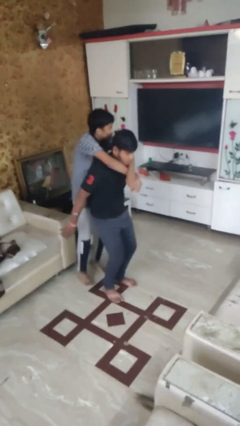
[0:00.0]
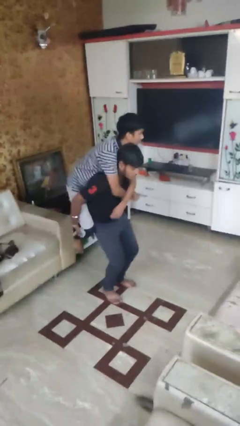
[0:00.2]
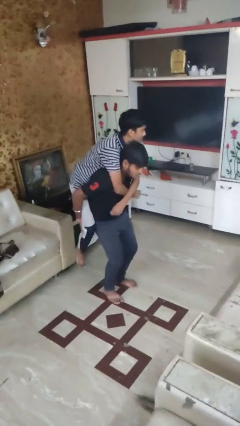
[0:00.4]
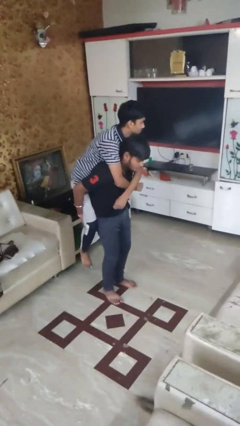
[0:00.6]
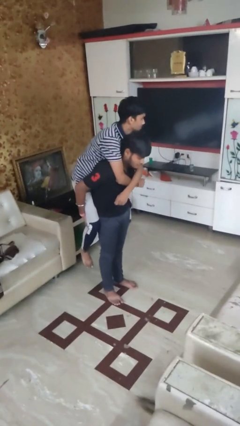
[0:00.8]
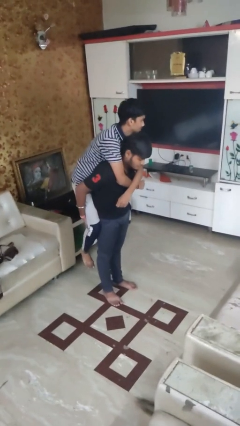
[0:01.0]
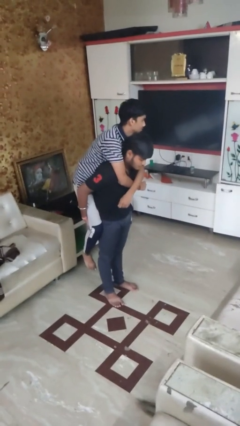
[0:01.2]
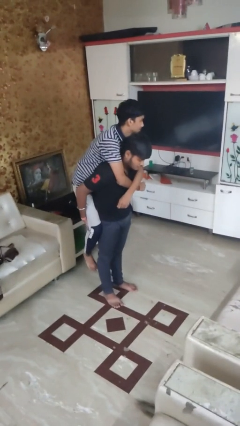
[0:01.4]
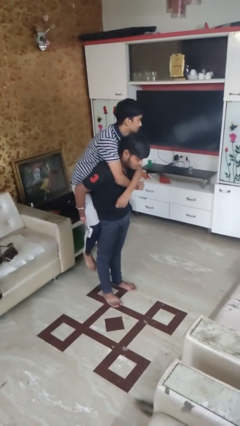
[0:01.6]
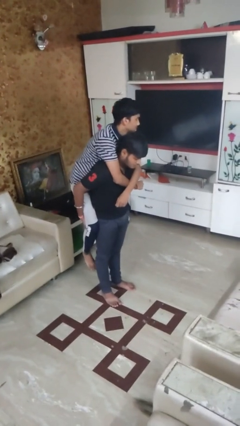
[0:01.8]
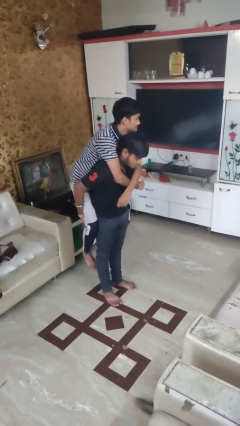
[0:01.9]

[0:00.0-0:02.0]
person carries person over shoulder

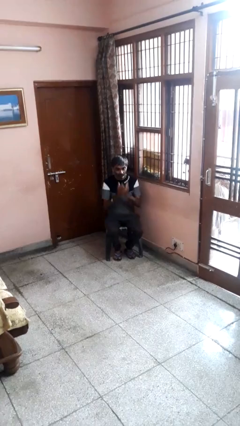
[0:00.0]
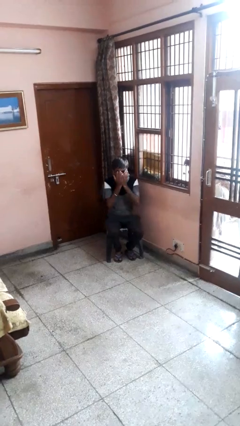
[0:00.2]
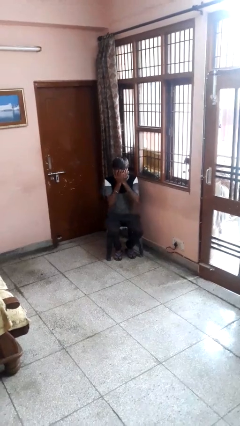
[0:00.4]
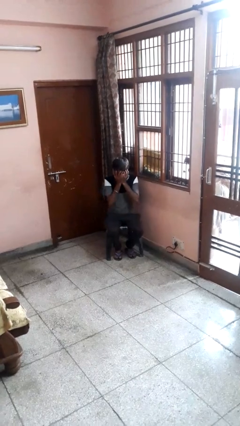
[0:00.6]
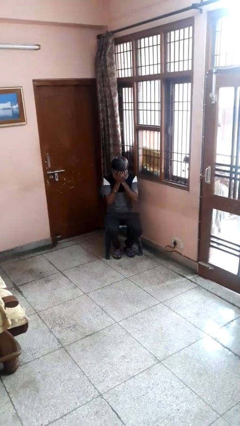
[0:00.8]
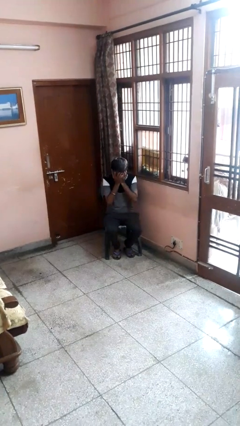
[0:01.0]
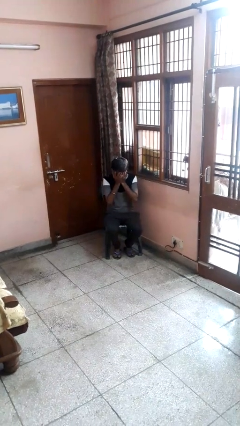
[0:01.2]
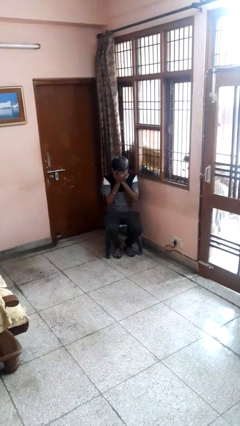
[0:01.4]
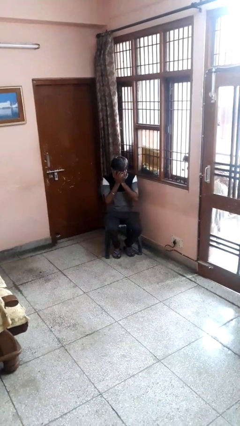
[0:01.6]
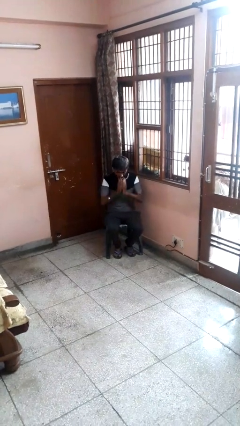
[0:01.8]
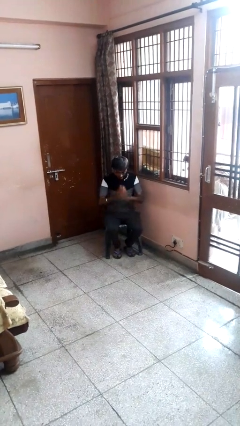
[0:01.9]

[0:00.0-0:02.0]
person covers face with hands

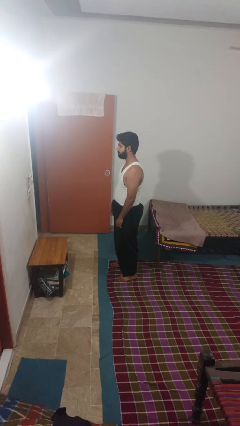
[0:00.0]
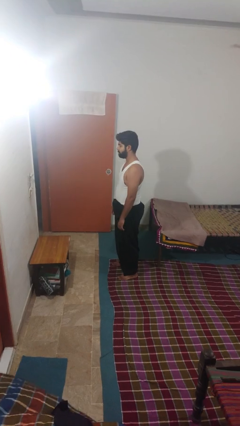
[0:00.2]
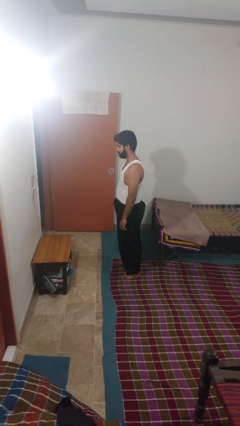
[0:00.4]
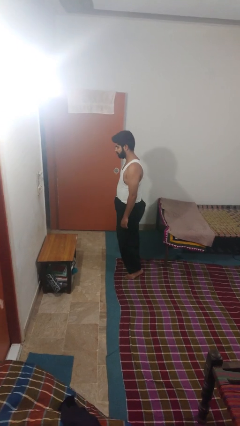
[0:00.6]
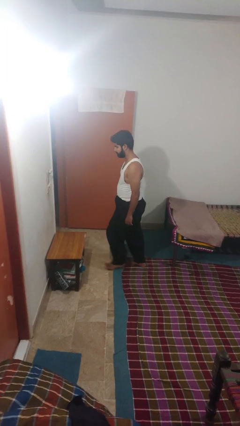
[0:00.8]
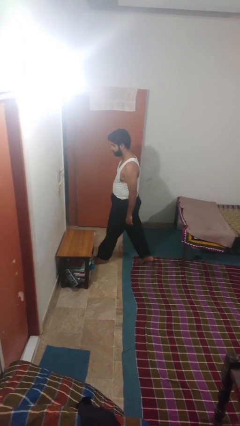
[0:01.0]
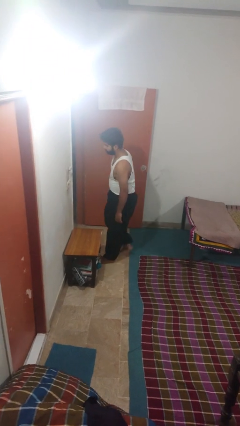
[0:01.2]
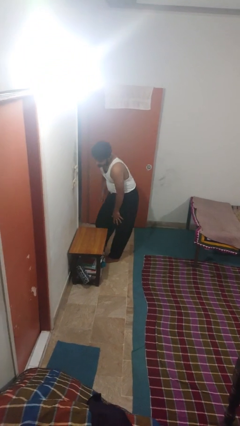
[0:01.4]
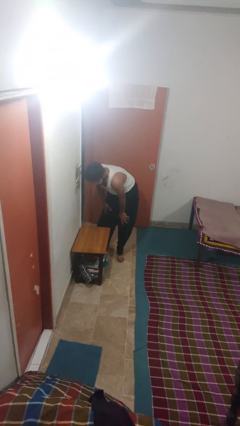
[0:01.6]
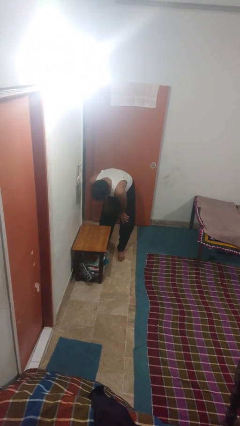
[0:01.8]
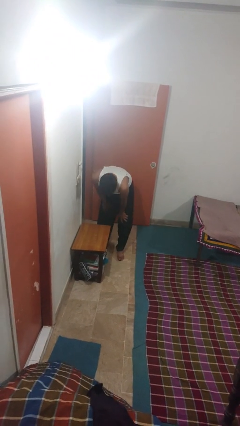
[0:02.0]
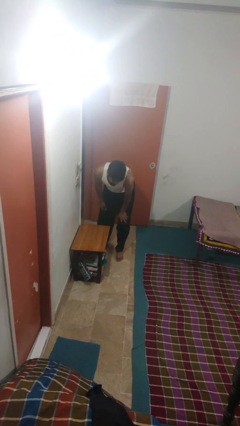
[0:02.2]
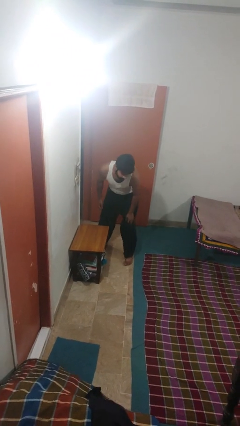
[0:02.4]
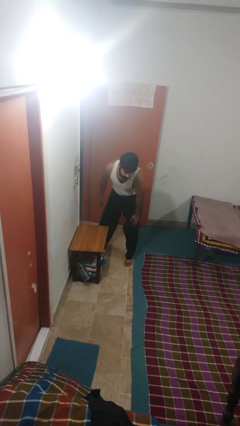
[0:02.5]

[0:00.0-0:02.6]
person bumps into table

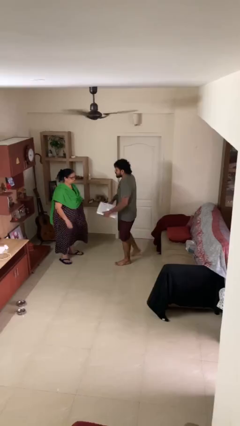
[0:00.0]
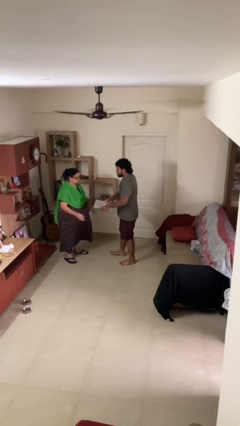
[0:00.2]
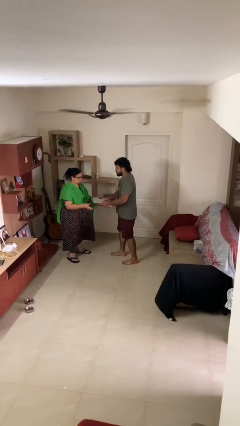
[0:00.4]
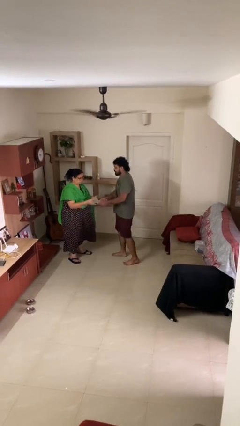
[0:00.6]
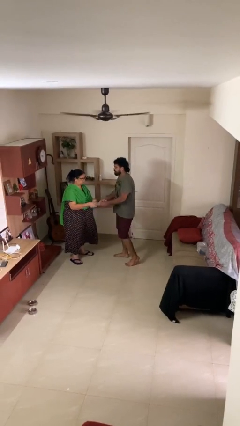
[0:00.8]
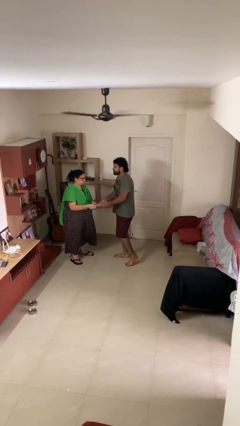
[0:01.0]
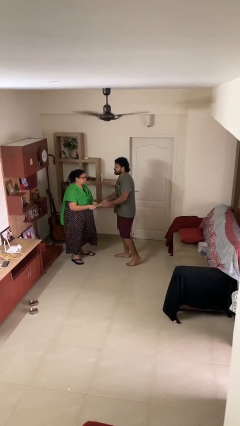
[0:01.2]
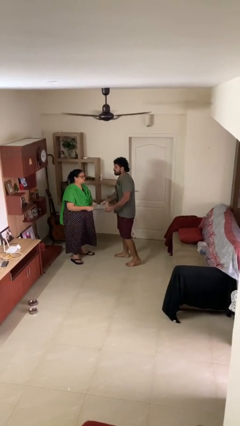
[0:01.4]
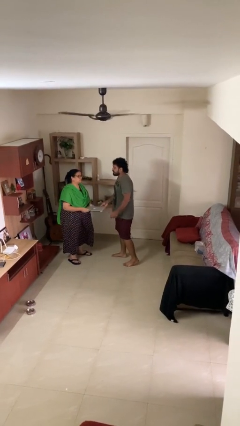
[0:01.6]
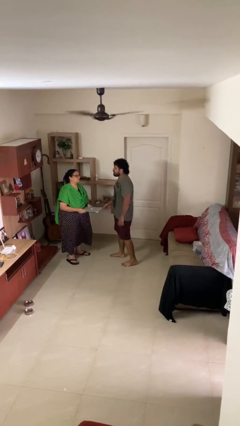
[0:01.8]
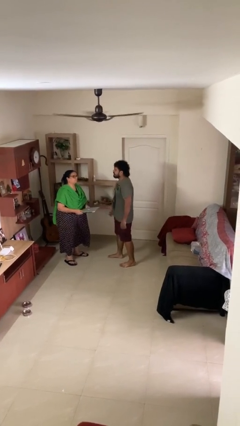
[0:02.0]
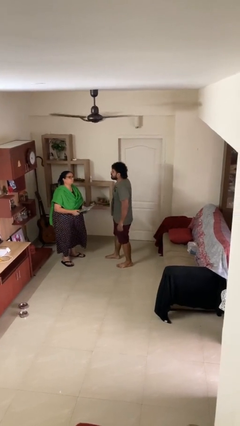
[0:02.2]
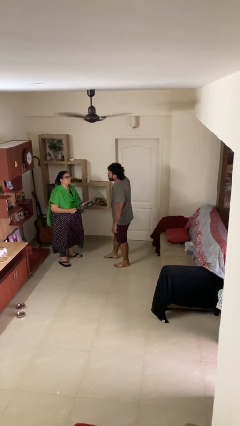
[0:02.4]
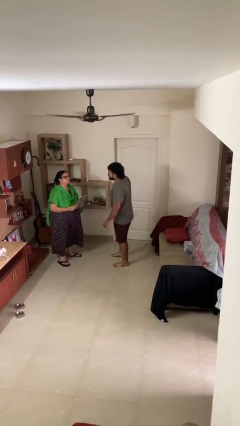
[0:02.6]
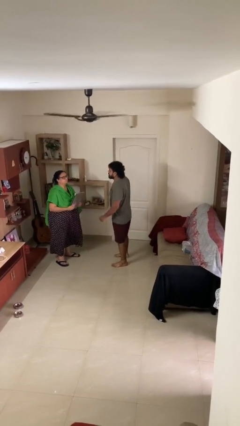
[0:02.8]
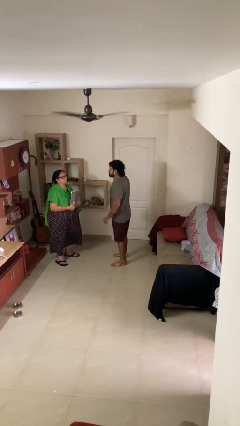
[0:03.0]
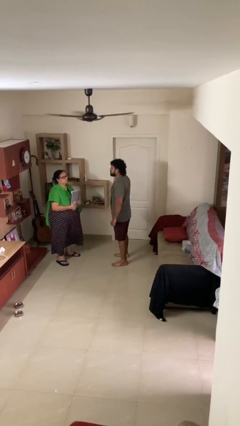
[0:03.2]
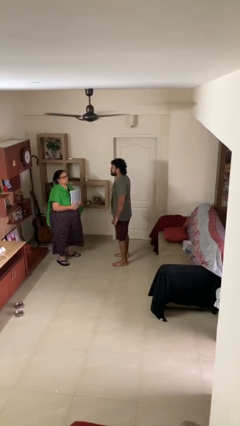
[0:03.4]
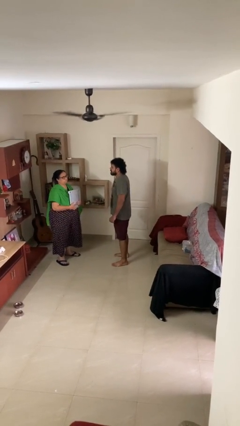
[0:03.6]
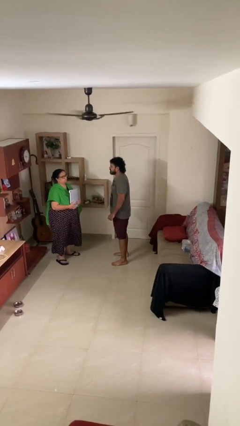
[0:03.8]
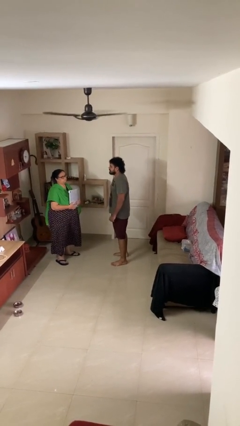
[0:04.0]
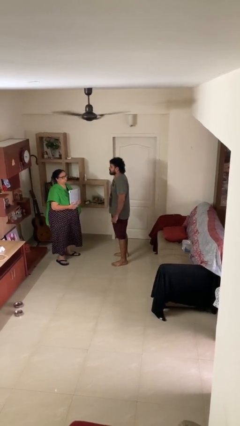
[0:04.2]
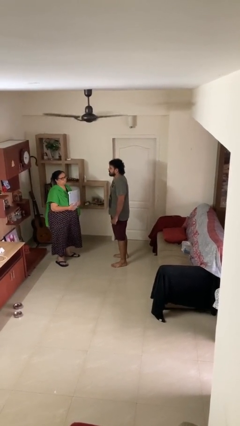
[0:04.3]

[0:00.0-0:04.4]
person transfers object to person

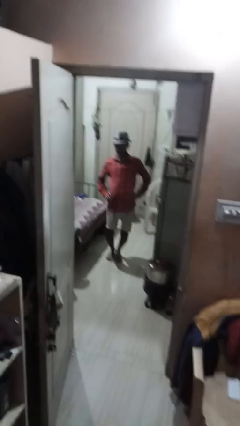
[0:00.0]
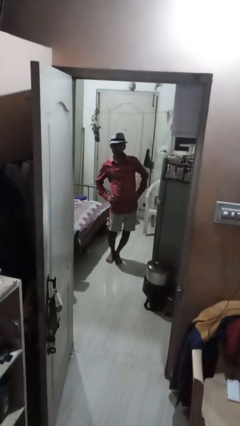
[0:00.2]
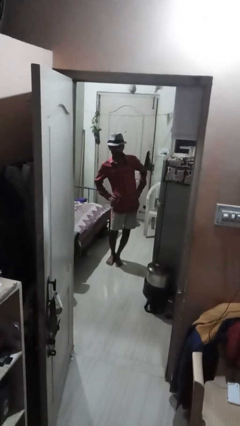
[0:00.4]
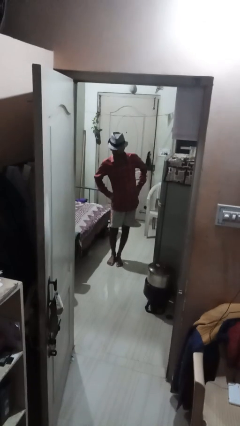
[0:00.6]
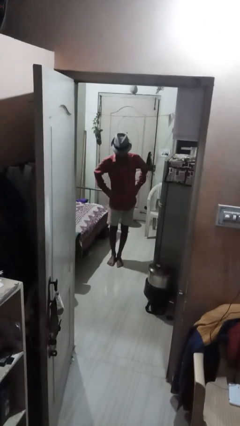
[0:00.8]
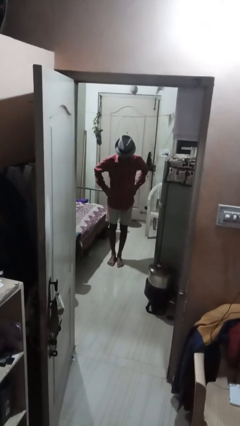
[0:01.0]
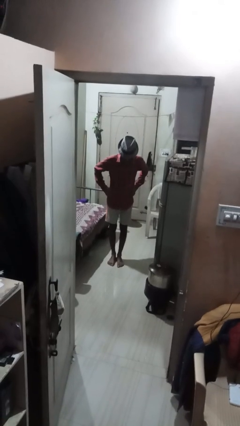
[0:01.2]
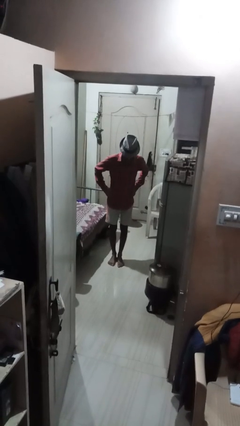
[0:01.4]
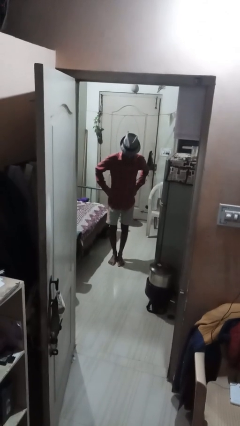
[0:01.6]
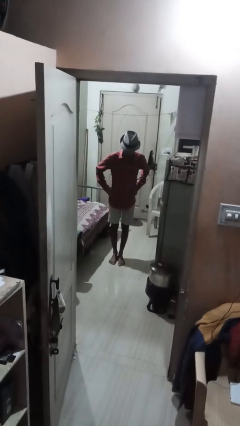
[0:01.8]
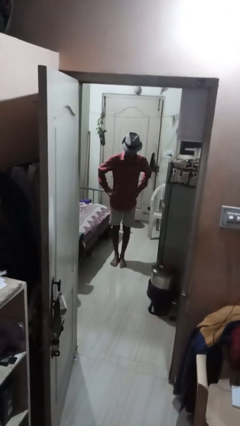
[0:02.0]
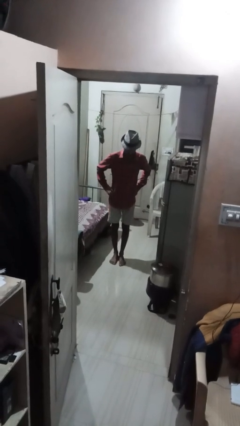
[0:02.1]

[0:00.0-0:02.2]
person wiggles hips

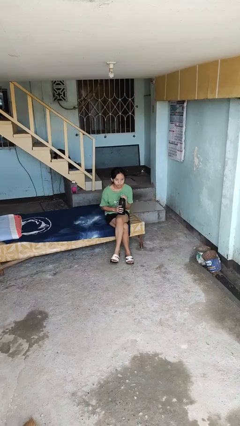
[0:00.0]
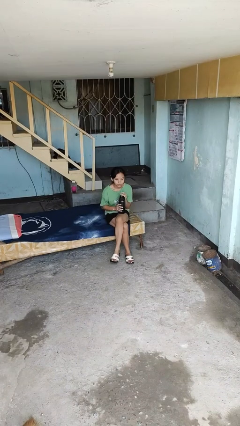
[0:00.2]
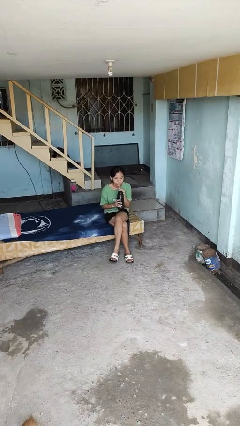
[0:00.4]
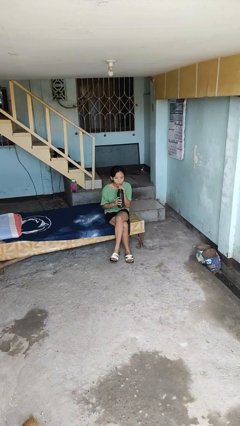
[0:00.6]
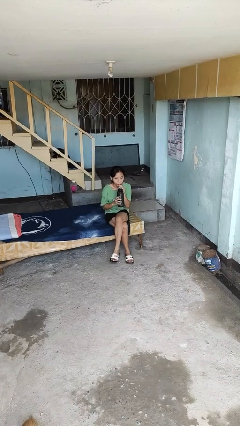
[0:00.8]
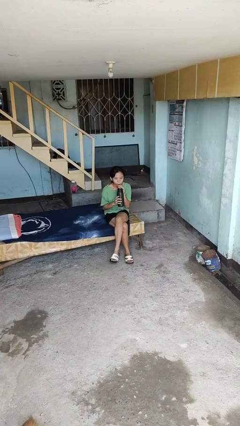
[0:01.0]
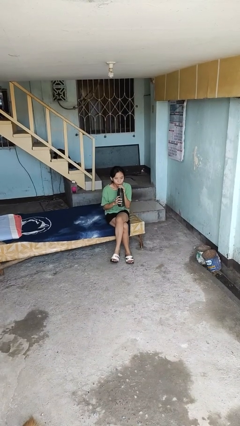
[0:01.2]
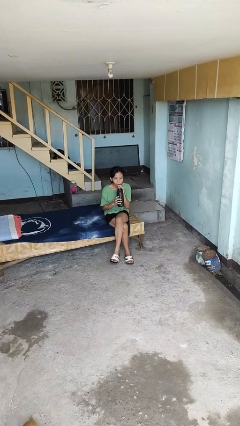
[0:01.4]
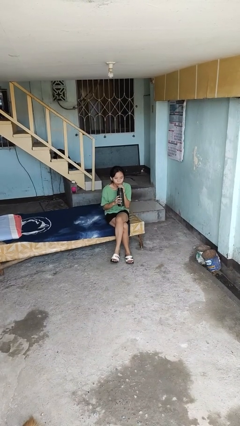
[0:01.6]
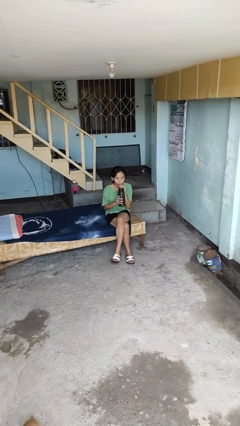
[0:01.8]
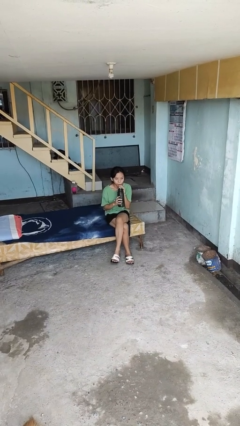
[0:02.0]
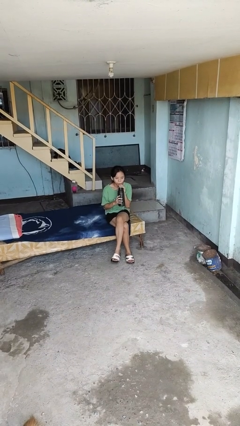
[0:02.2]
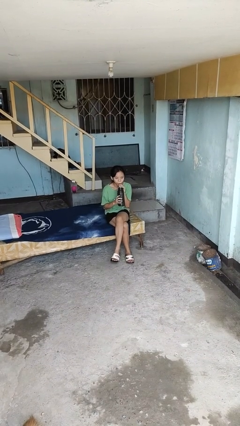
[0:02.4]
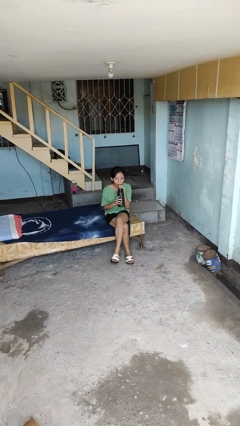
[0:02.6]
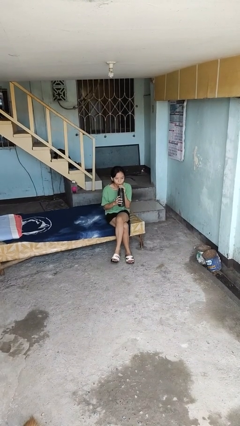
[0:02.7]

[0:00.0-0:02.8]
person drinks from straw

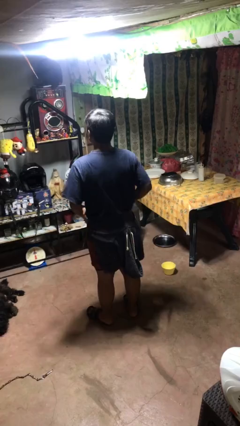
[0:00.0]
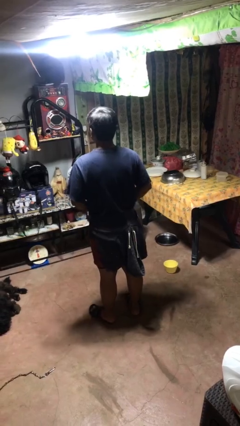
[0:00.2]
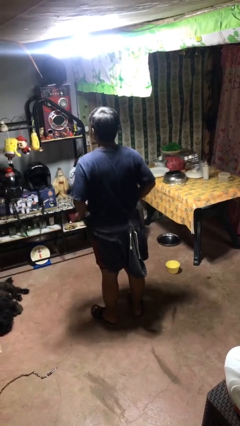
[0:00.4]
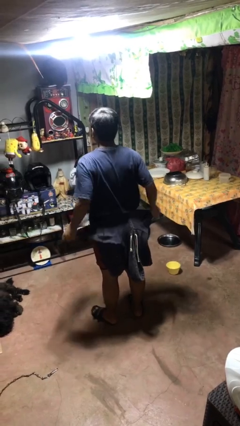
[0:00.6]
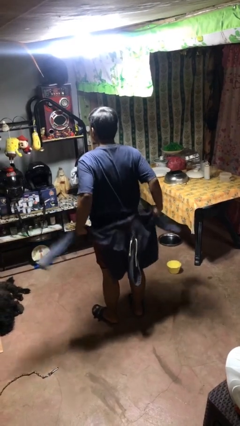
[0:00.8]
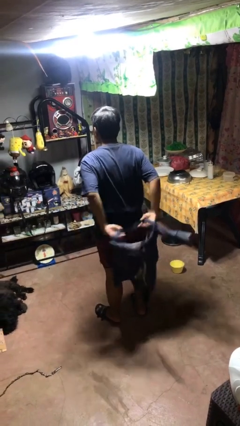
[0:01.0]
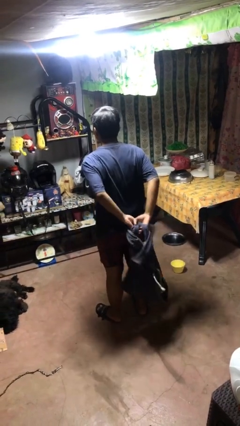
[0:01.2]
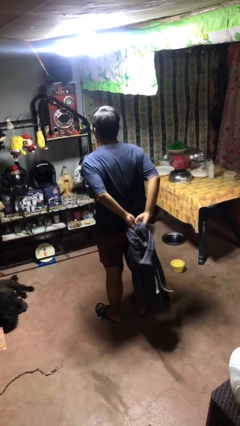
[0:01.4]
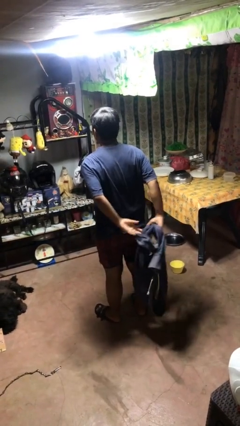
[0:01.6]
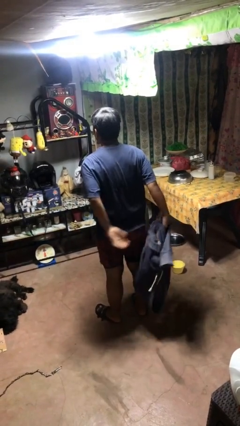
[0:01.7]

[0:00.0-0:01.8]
person unties jacket around waist
